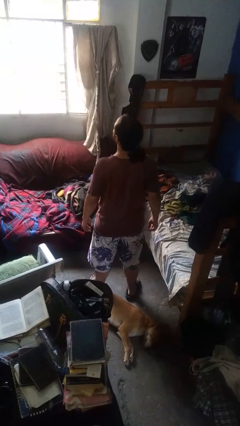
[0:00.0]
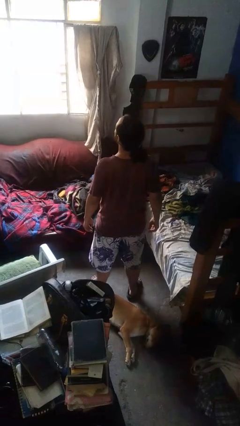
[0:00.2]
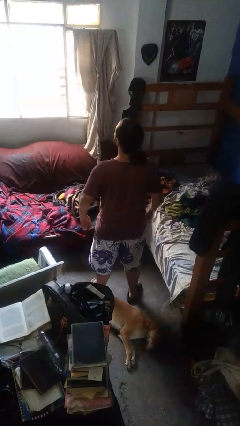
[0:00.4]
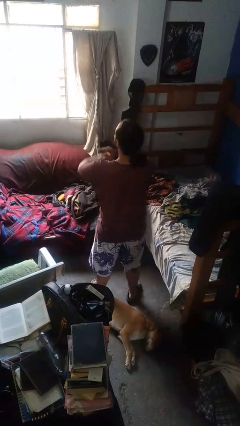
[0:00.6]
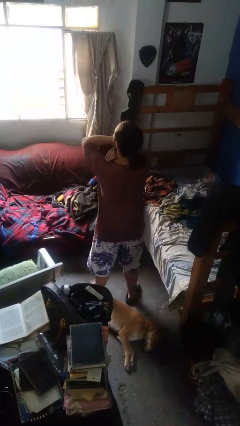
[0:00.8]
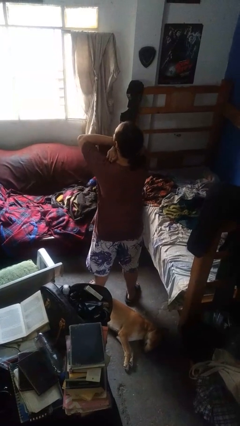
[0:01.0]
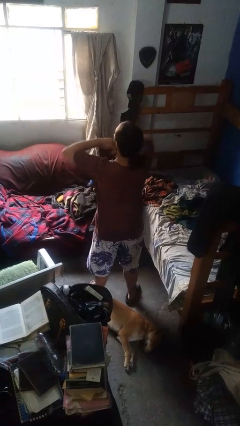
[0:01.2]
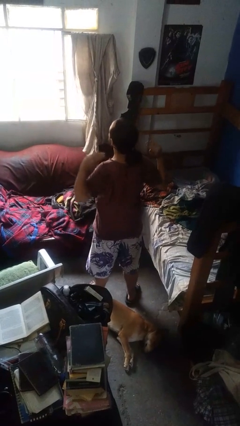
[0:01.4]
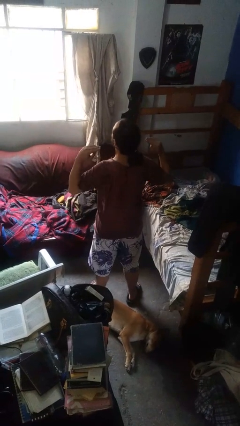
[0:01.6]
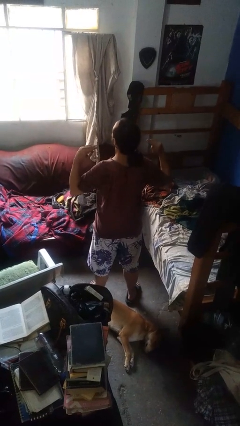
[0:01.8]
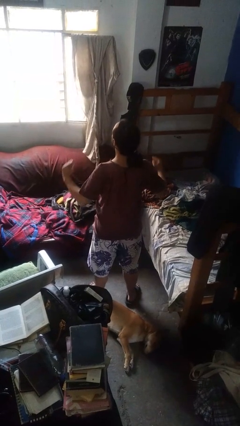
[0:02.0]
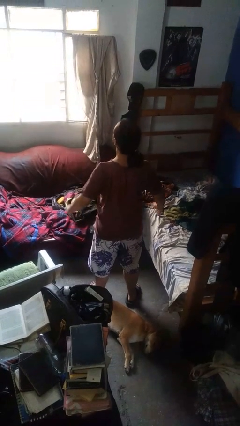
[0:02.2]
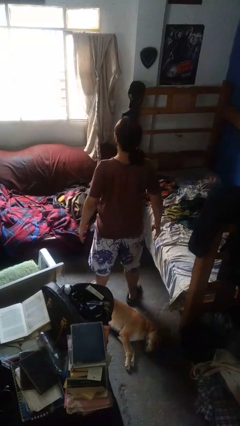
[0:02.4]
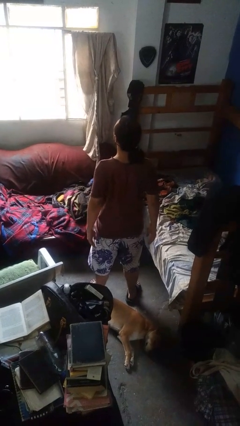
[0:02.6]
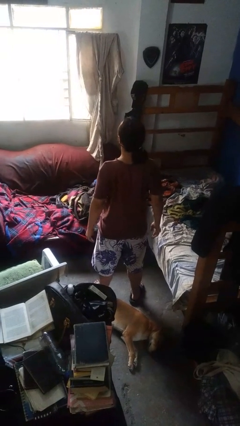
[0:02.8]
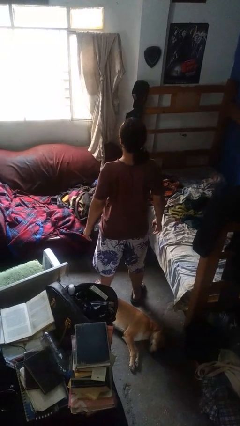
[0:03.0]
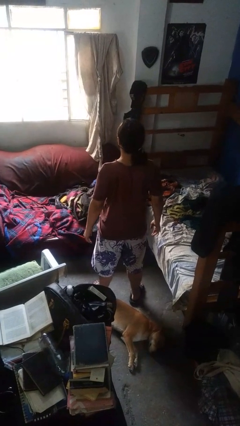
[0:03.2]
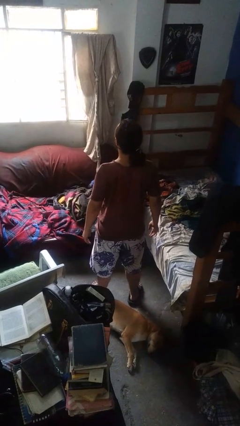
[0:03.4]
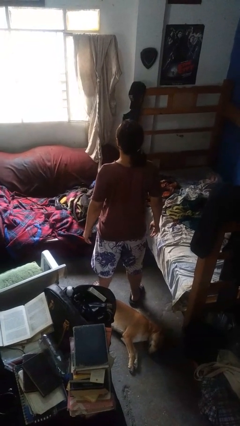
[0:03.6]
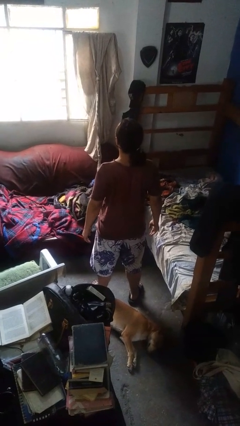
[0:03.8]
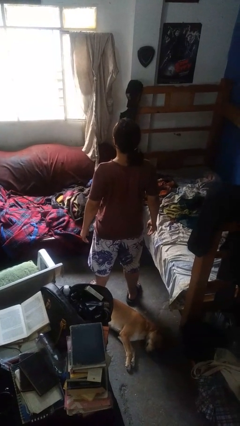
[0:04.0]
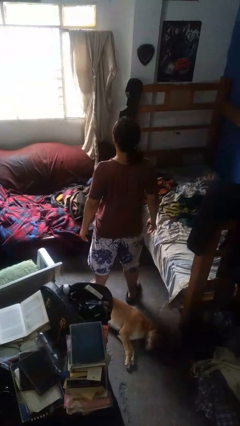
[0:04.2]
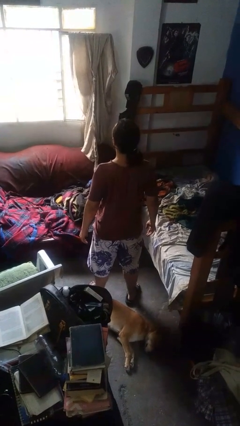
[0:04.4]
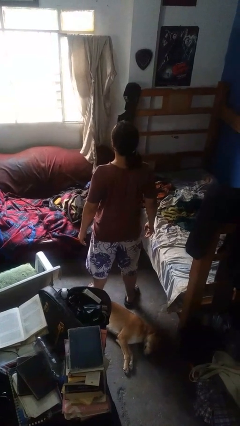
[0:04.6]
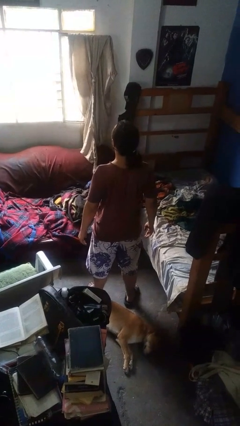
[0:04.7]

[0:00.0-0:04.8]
person gestures watch closely

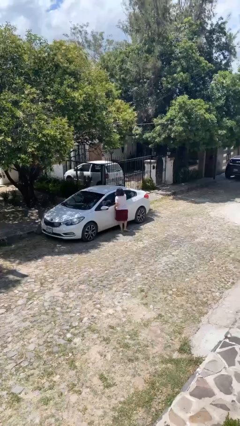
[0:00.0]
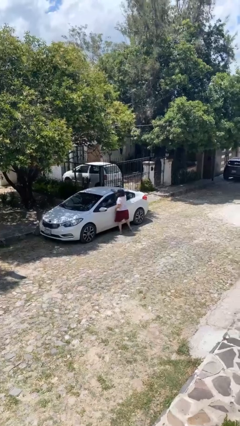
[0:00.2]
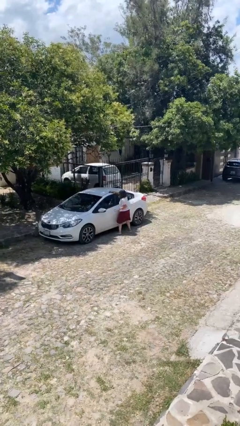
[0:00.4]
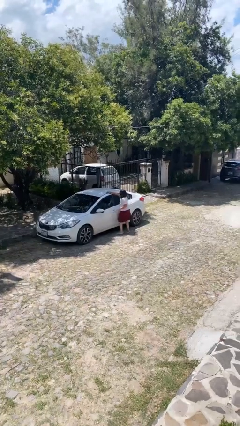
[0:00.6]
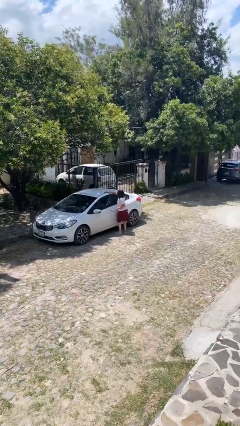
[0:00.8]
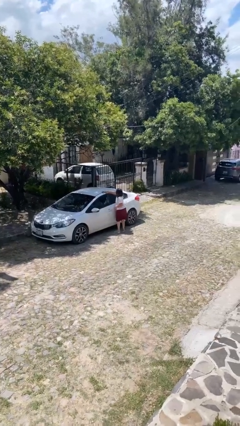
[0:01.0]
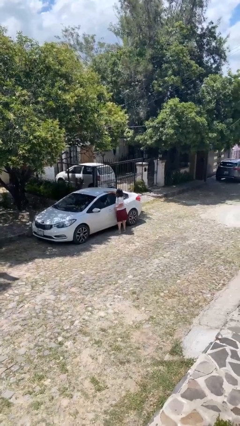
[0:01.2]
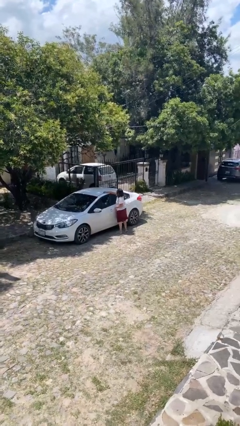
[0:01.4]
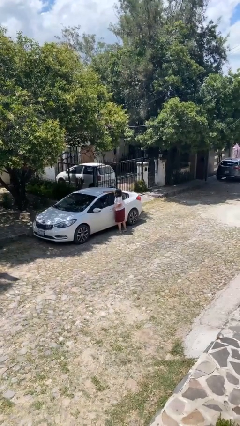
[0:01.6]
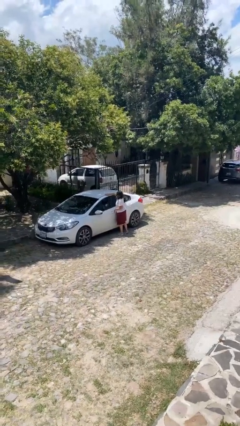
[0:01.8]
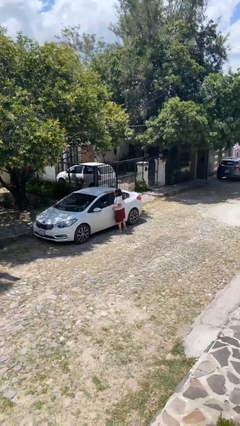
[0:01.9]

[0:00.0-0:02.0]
person polishes car with rag

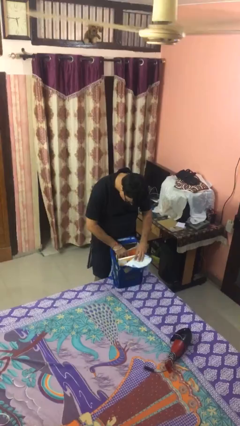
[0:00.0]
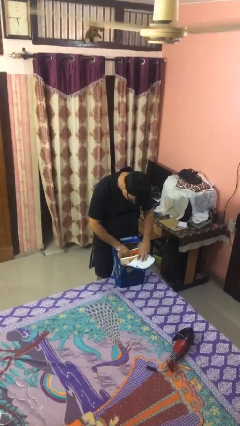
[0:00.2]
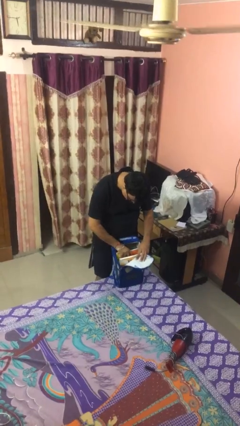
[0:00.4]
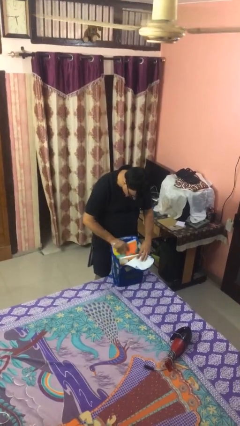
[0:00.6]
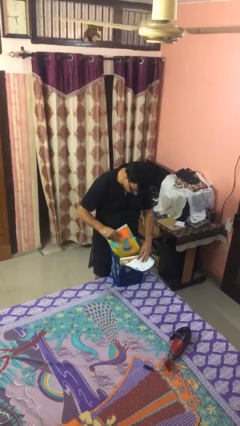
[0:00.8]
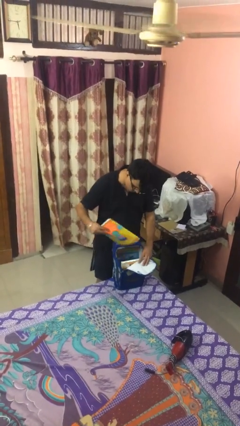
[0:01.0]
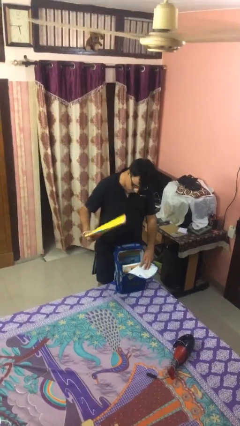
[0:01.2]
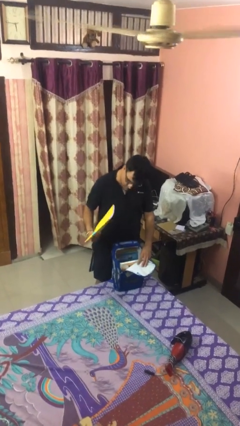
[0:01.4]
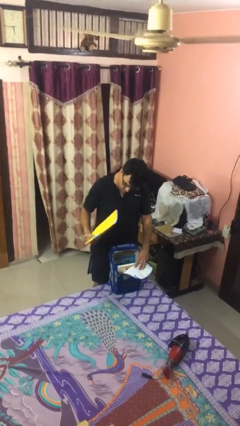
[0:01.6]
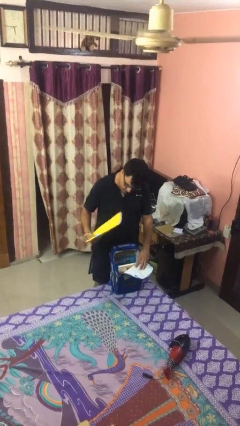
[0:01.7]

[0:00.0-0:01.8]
person takes object from backpack

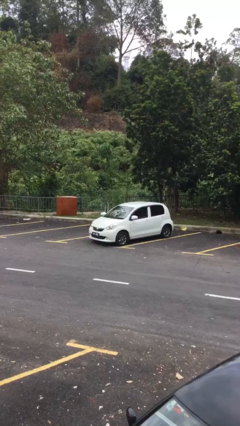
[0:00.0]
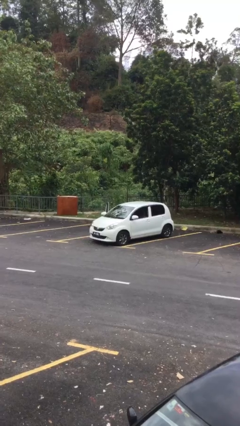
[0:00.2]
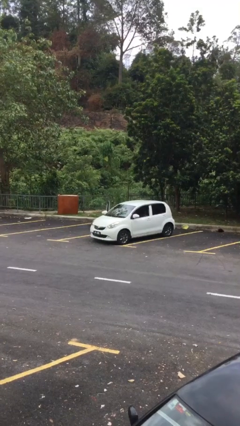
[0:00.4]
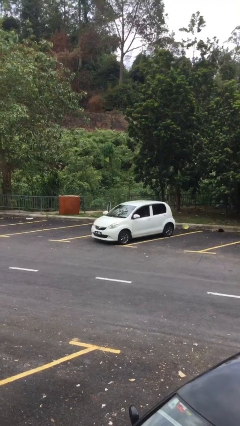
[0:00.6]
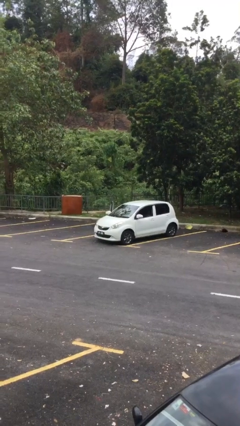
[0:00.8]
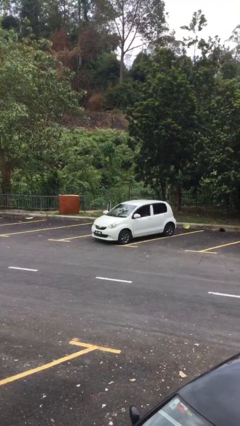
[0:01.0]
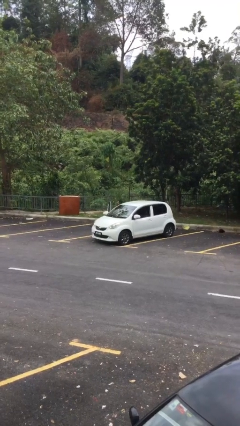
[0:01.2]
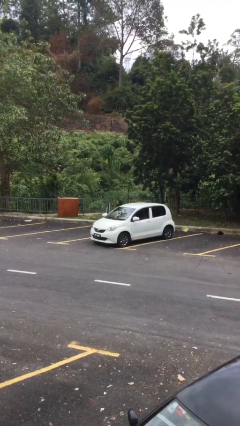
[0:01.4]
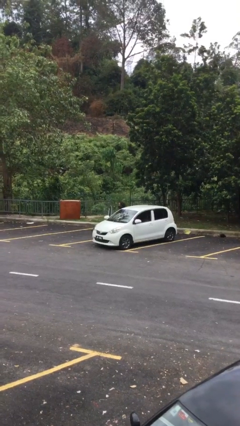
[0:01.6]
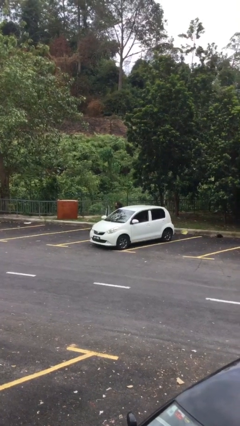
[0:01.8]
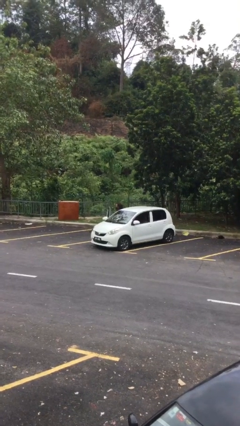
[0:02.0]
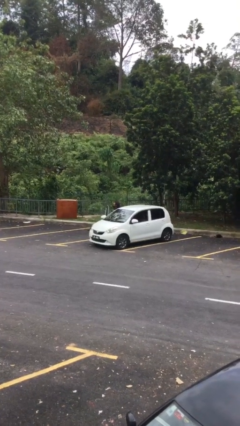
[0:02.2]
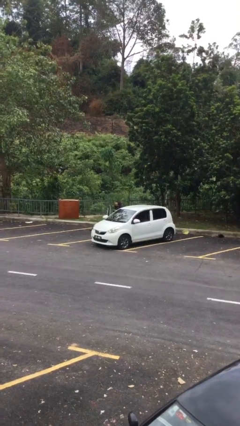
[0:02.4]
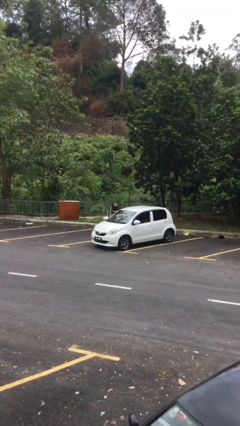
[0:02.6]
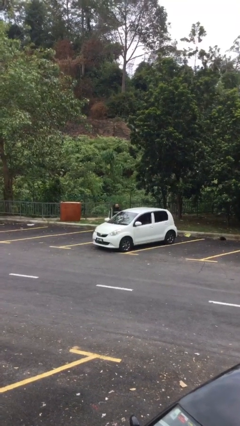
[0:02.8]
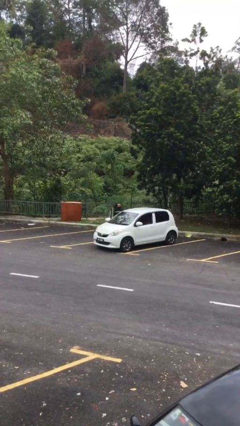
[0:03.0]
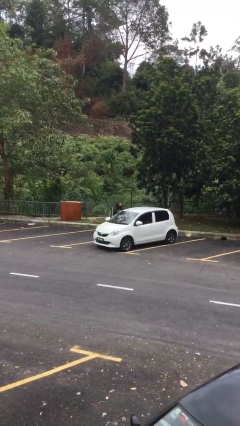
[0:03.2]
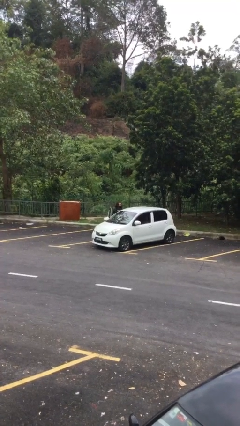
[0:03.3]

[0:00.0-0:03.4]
person exits car

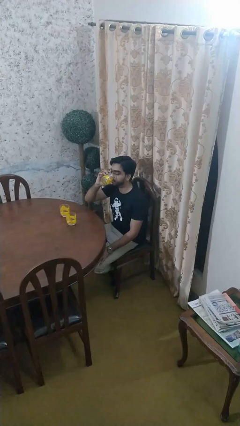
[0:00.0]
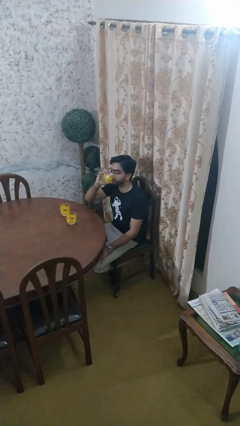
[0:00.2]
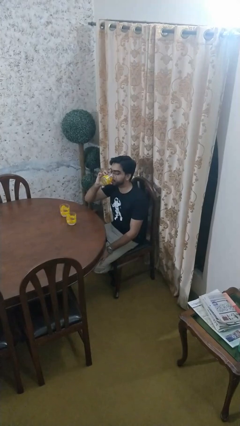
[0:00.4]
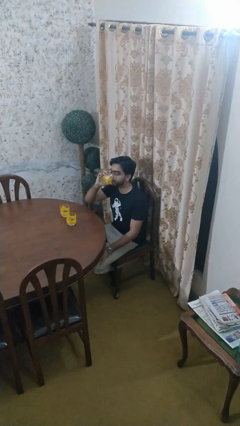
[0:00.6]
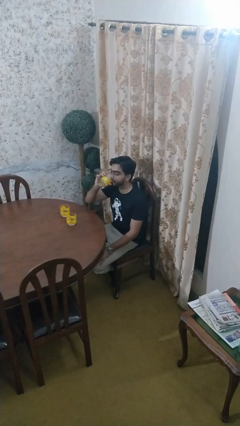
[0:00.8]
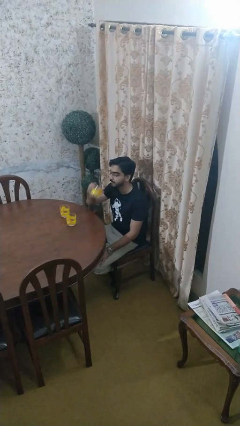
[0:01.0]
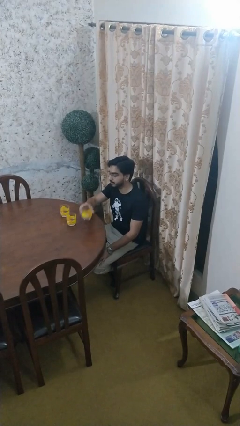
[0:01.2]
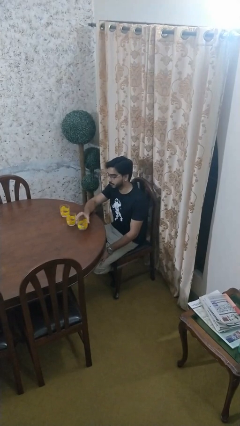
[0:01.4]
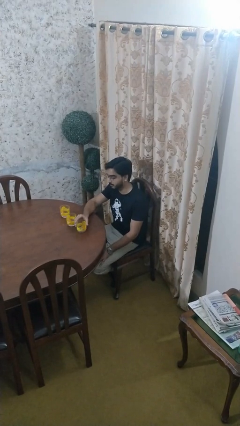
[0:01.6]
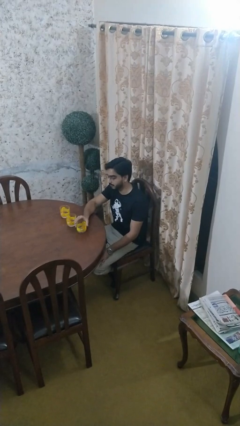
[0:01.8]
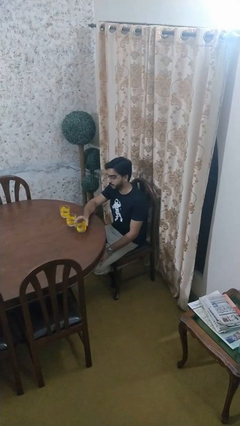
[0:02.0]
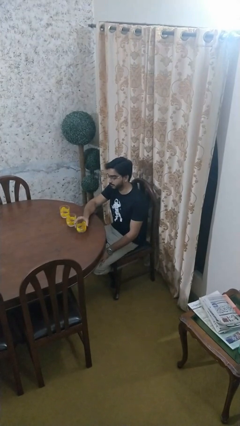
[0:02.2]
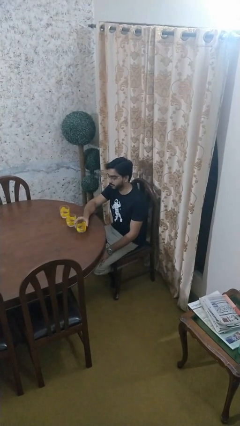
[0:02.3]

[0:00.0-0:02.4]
person puts down object on table

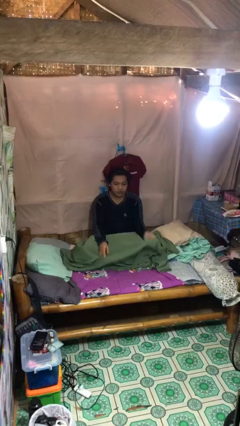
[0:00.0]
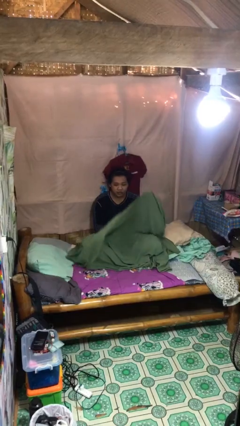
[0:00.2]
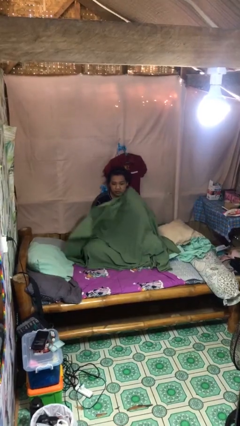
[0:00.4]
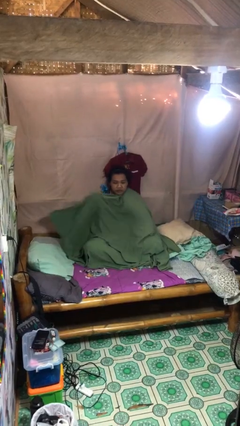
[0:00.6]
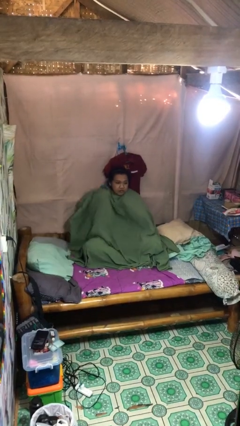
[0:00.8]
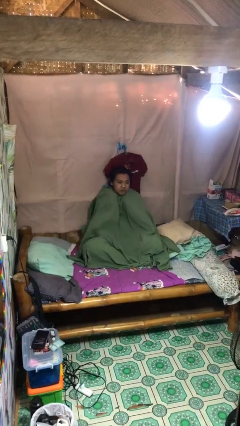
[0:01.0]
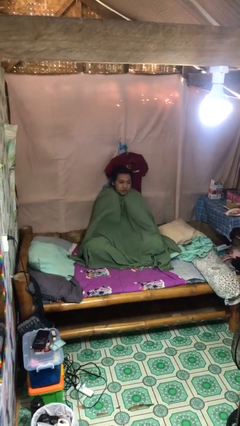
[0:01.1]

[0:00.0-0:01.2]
person covers with blanket

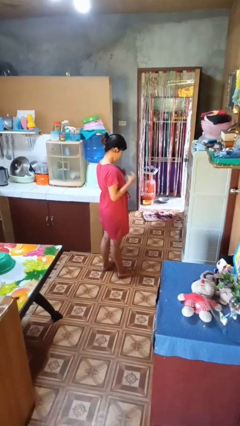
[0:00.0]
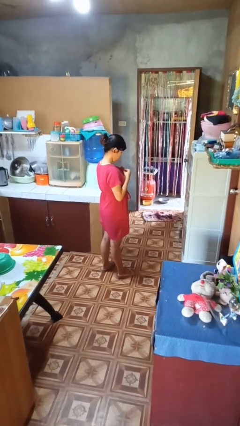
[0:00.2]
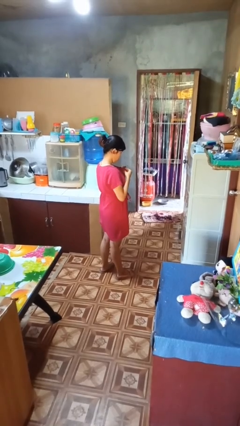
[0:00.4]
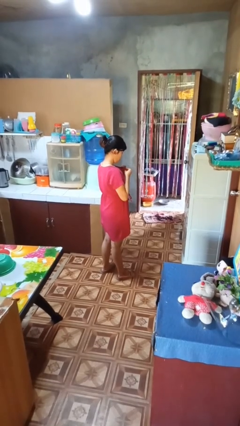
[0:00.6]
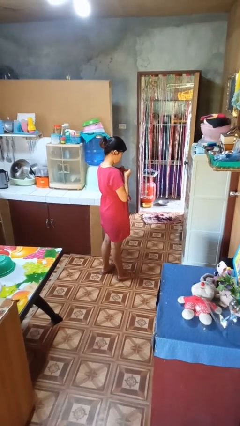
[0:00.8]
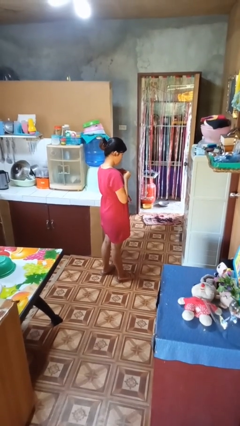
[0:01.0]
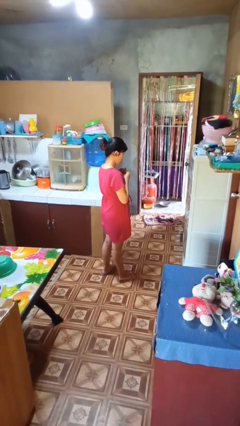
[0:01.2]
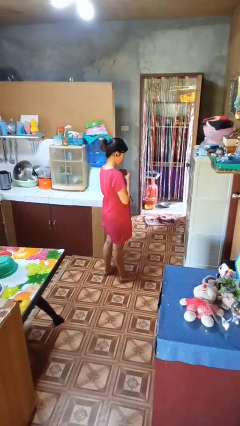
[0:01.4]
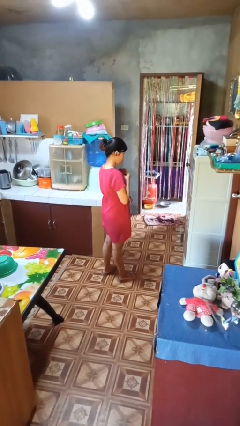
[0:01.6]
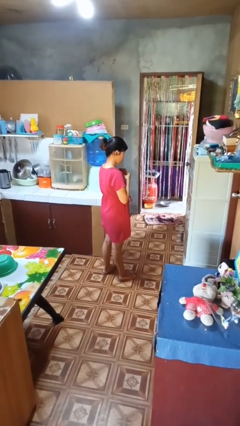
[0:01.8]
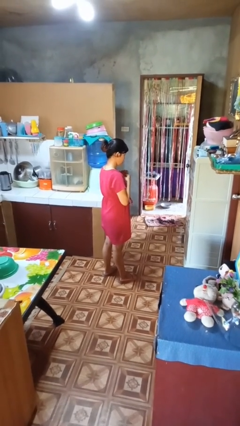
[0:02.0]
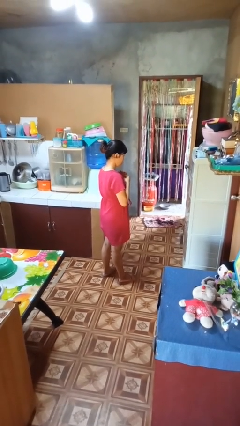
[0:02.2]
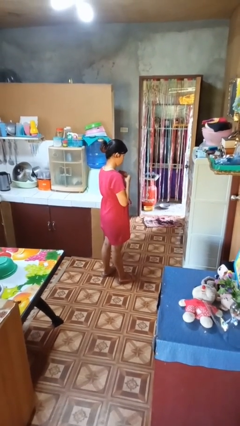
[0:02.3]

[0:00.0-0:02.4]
person buttons shirt
